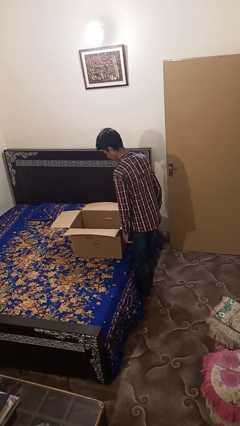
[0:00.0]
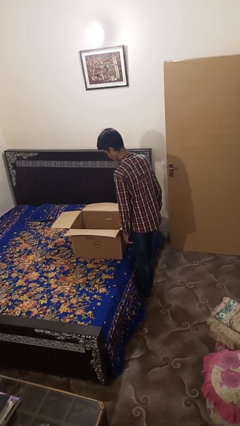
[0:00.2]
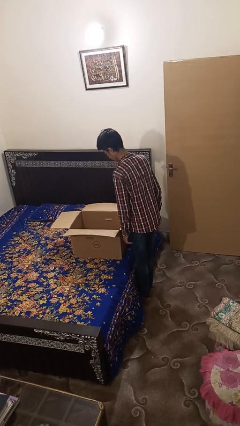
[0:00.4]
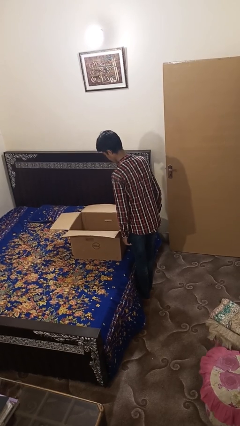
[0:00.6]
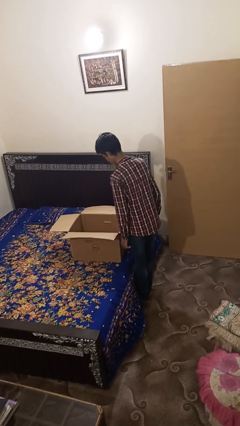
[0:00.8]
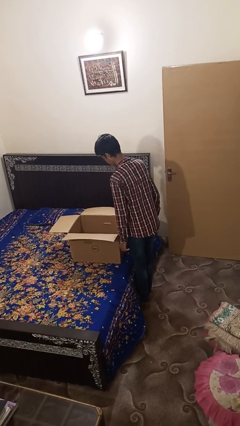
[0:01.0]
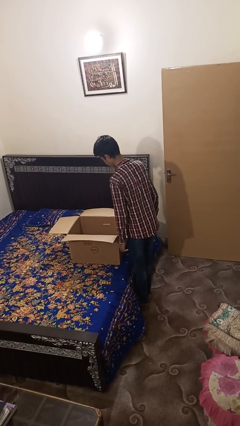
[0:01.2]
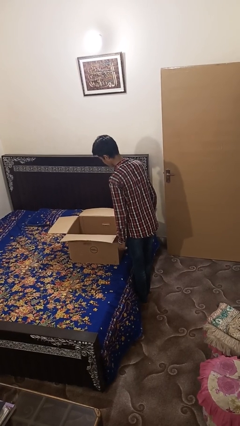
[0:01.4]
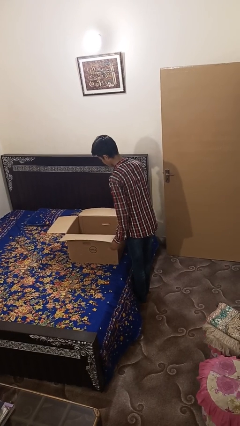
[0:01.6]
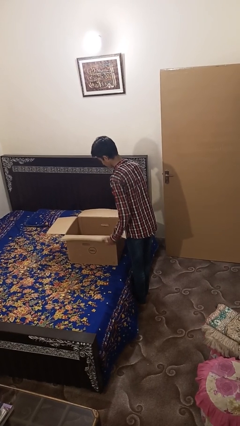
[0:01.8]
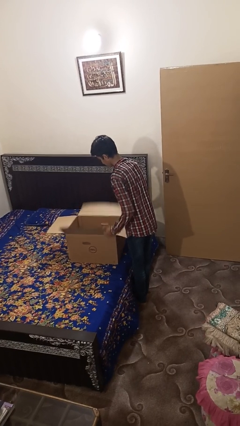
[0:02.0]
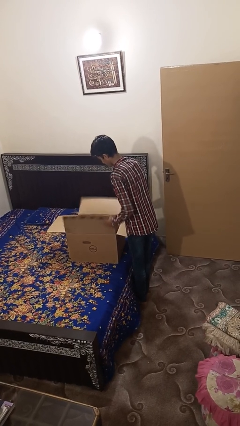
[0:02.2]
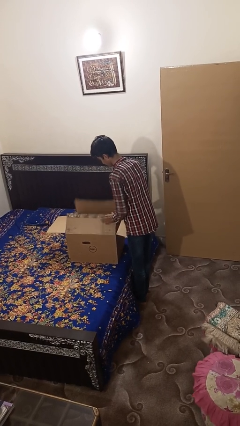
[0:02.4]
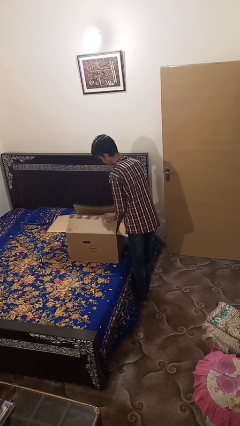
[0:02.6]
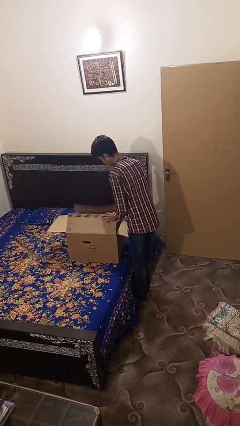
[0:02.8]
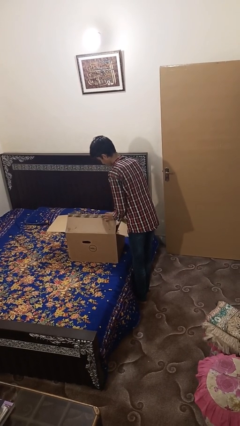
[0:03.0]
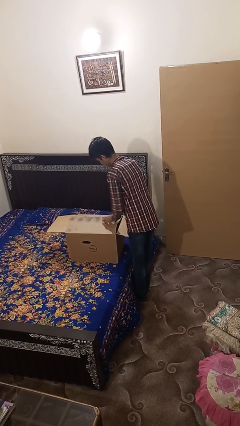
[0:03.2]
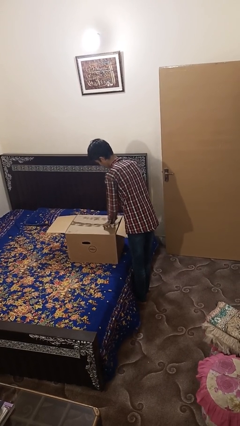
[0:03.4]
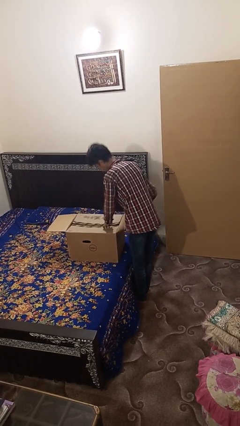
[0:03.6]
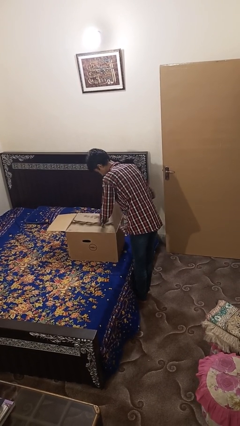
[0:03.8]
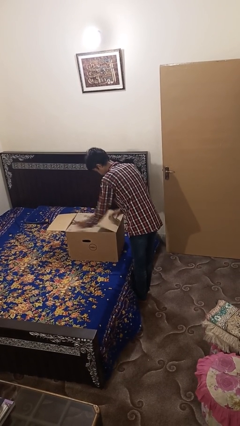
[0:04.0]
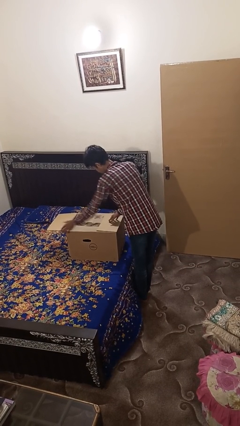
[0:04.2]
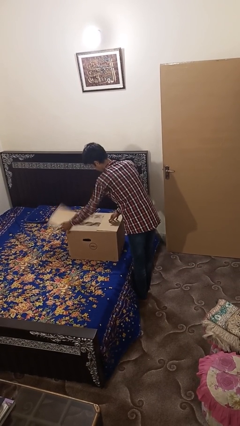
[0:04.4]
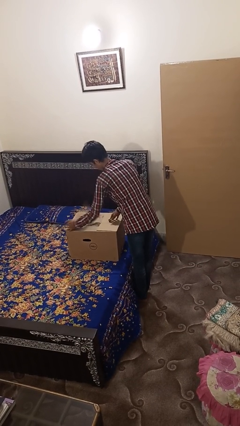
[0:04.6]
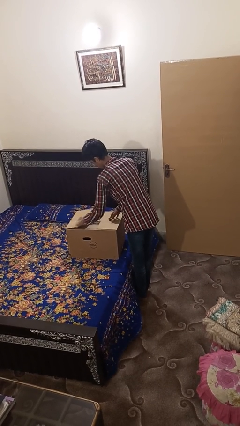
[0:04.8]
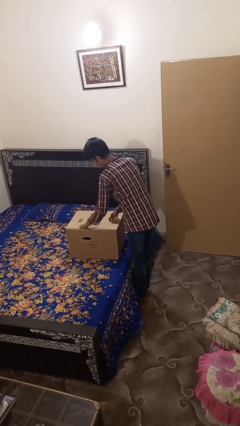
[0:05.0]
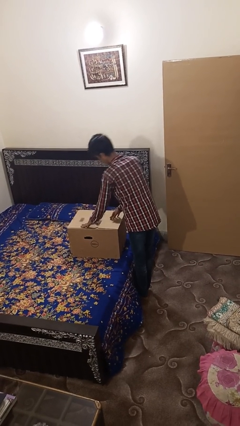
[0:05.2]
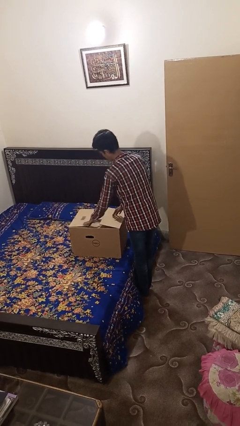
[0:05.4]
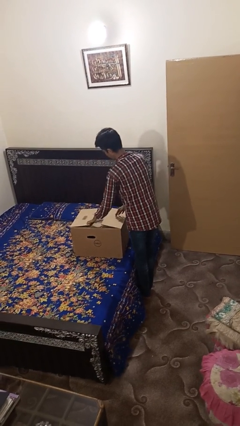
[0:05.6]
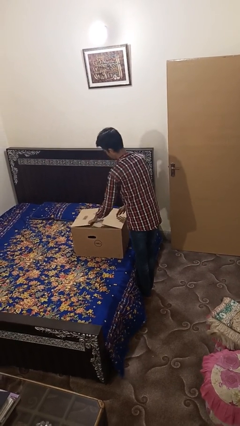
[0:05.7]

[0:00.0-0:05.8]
person closes box

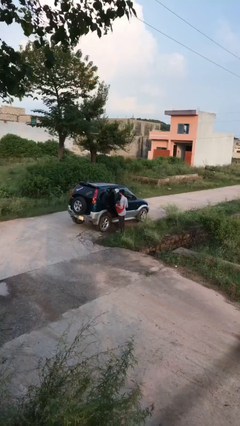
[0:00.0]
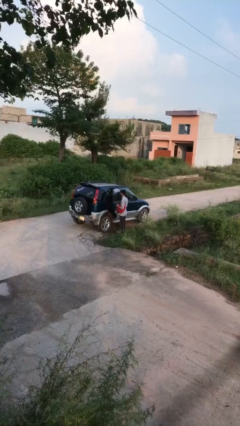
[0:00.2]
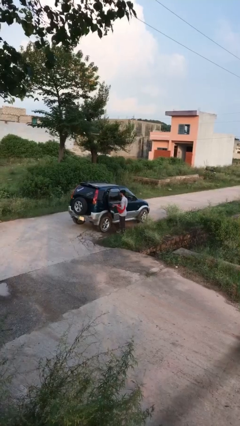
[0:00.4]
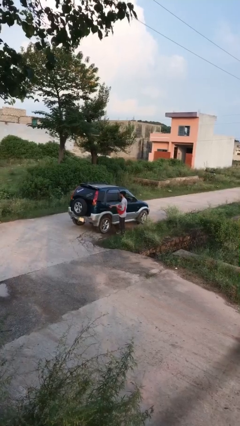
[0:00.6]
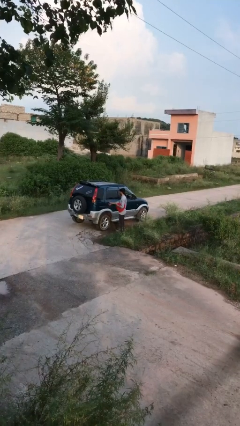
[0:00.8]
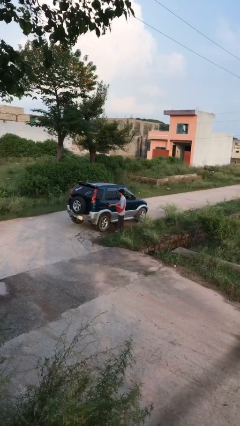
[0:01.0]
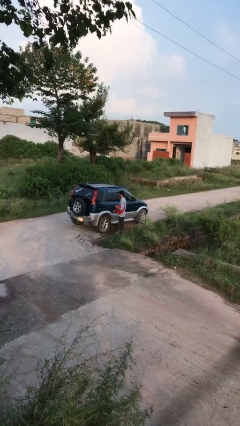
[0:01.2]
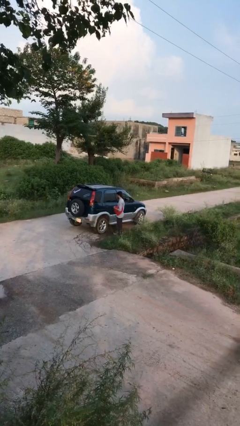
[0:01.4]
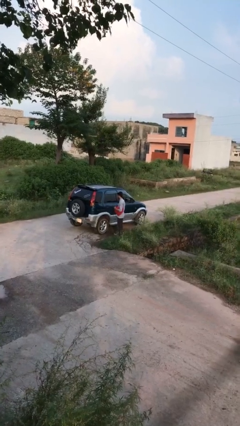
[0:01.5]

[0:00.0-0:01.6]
person closes car door

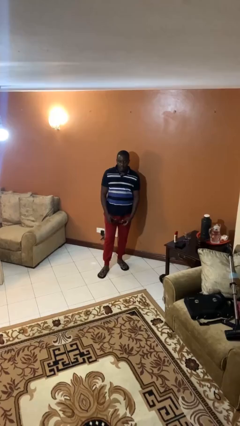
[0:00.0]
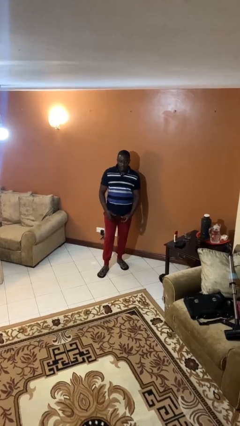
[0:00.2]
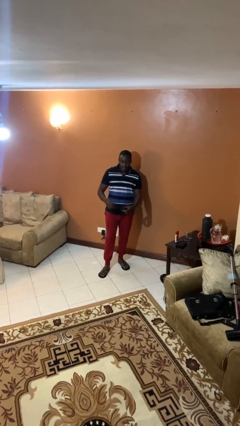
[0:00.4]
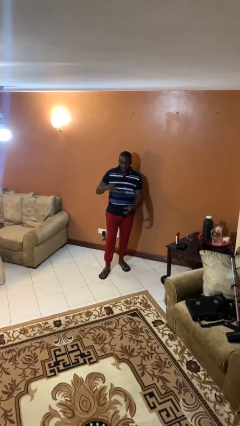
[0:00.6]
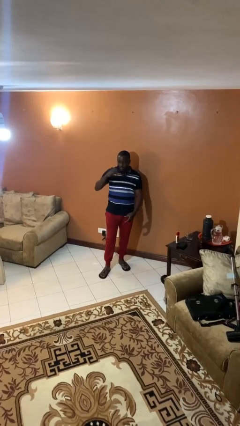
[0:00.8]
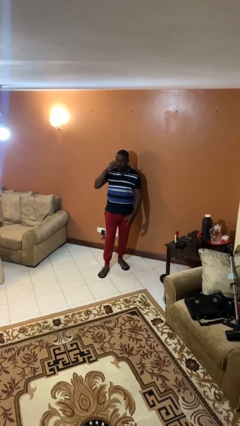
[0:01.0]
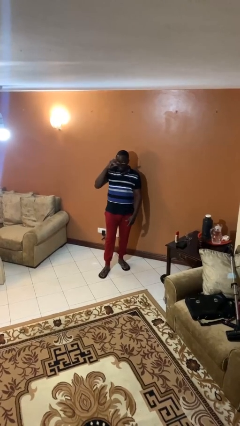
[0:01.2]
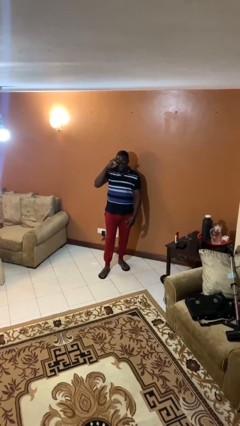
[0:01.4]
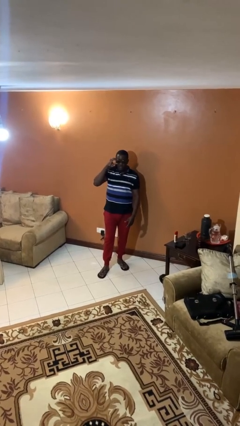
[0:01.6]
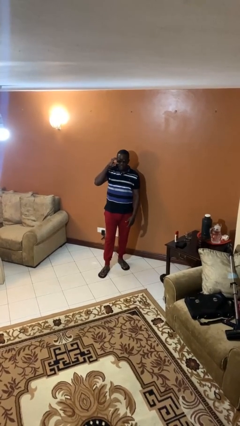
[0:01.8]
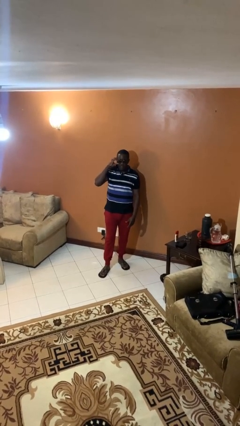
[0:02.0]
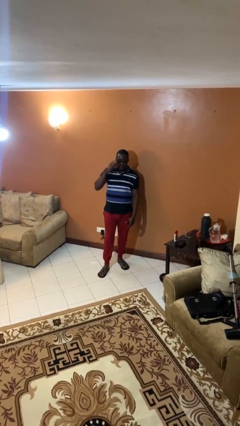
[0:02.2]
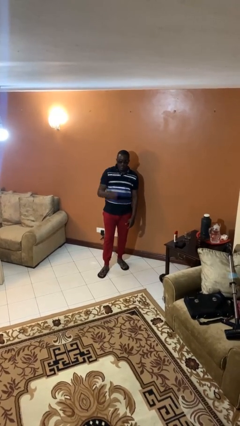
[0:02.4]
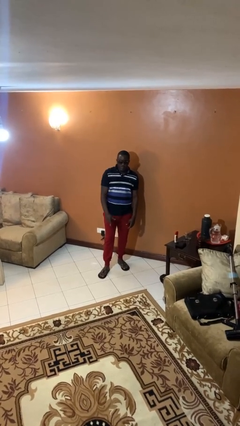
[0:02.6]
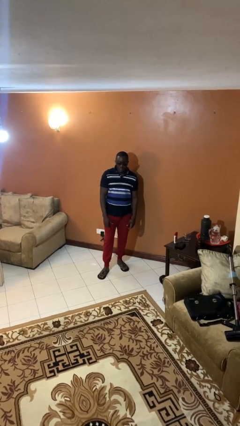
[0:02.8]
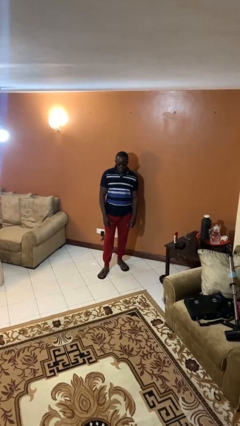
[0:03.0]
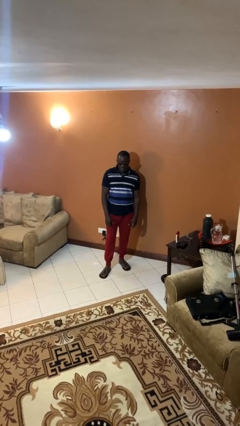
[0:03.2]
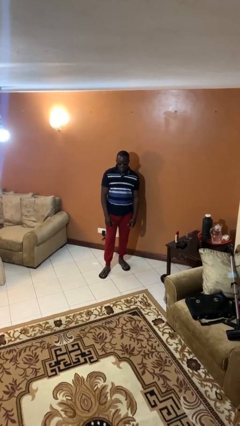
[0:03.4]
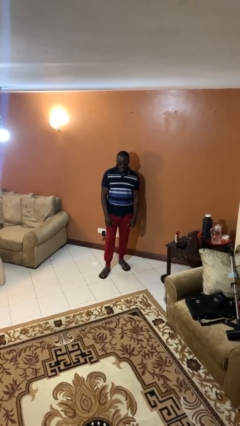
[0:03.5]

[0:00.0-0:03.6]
person puts on sunglasses

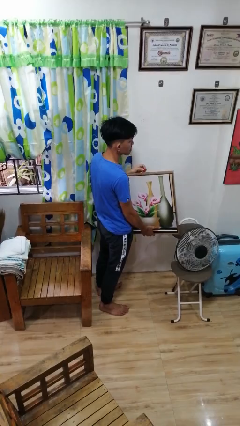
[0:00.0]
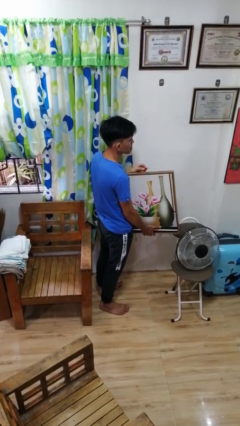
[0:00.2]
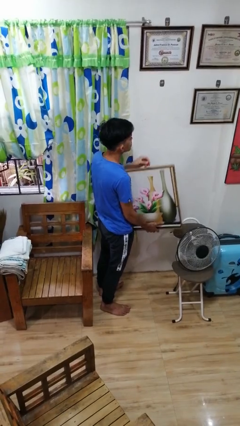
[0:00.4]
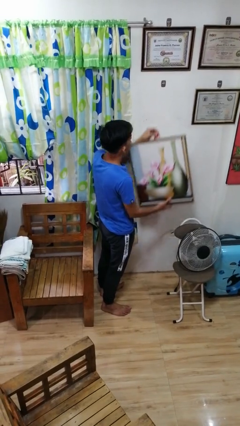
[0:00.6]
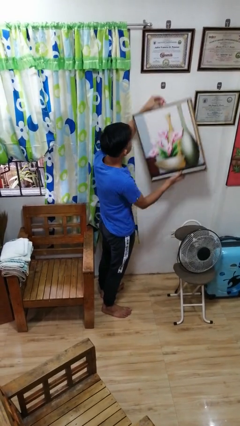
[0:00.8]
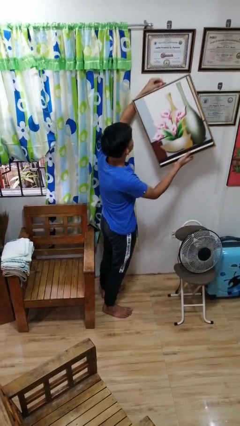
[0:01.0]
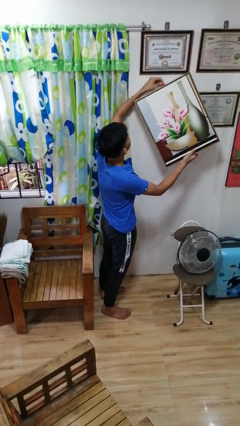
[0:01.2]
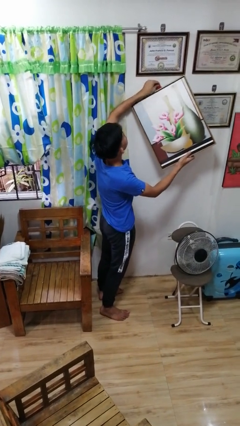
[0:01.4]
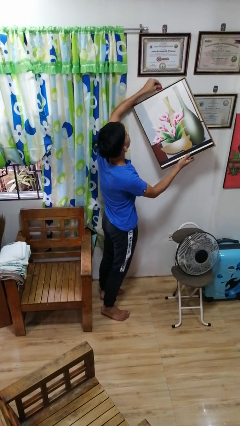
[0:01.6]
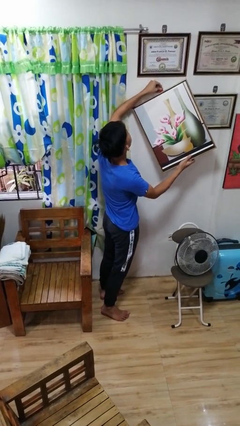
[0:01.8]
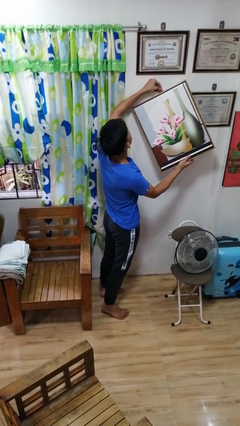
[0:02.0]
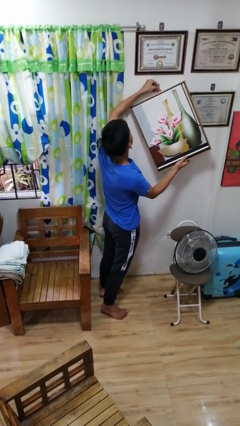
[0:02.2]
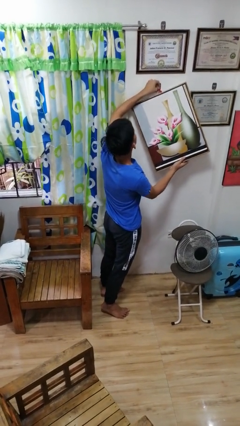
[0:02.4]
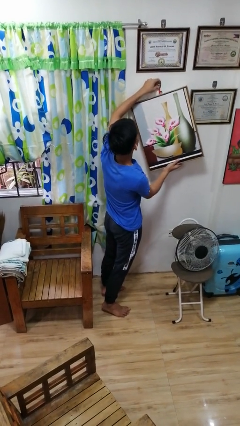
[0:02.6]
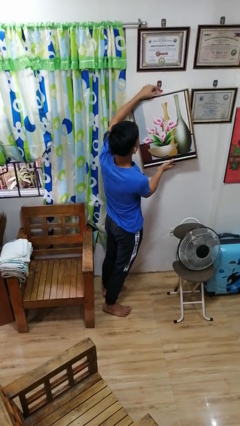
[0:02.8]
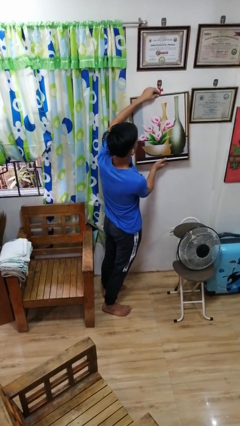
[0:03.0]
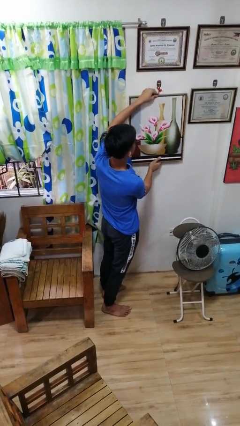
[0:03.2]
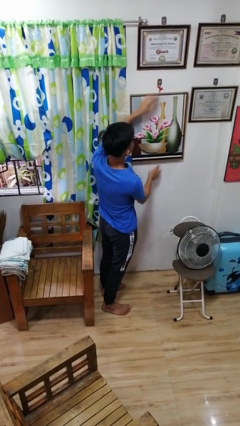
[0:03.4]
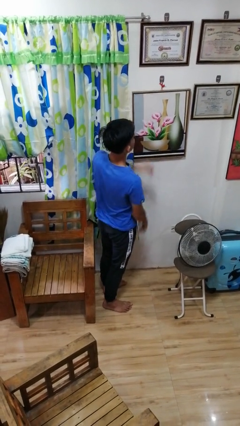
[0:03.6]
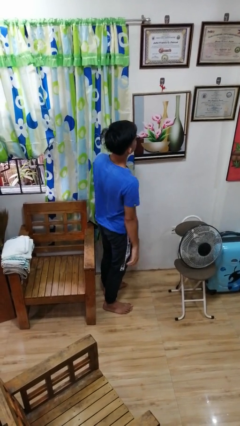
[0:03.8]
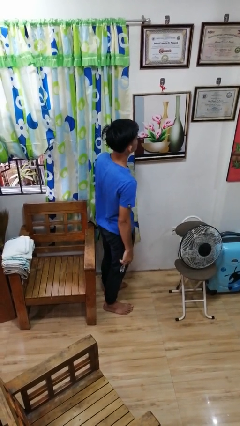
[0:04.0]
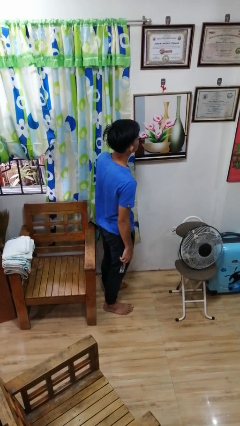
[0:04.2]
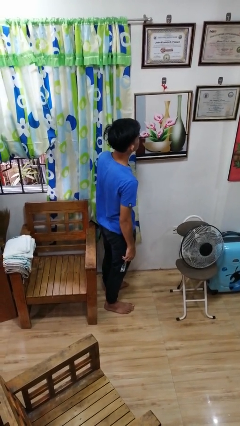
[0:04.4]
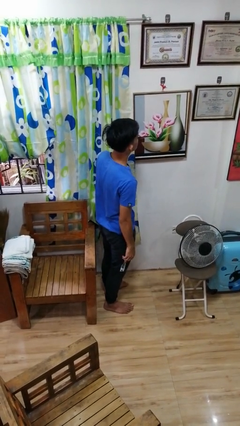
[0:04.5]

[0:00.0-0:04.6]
person puts up picture frame

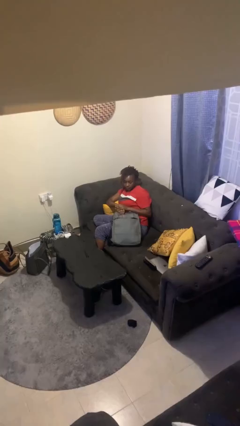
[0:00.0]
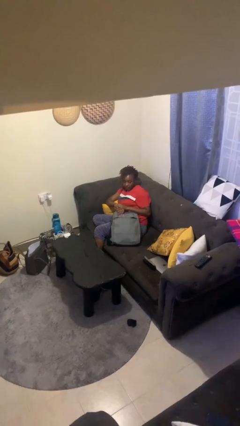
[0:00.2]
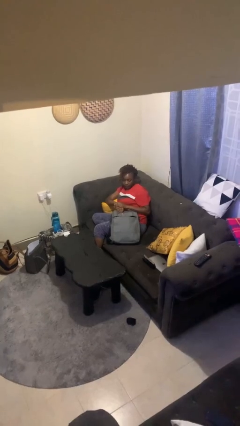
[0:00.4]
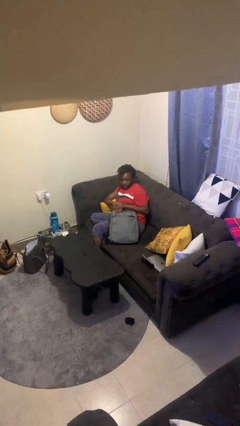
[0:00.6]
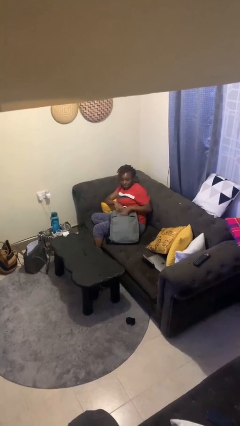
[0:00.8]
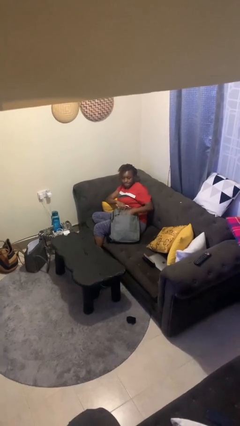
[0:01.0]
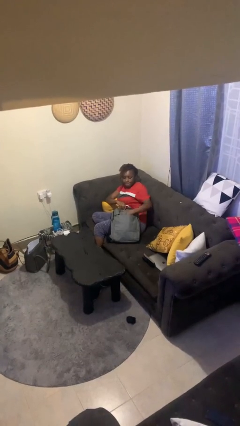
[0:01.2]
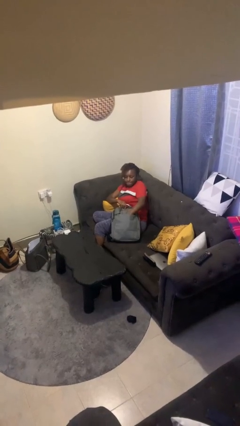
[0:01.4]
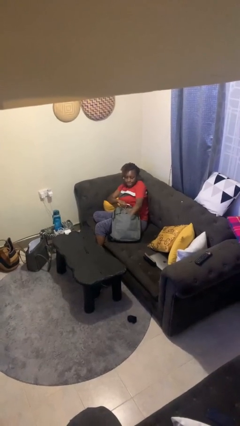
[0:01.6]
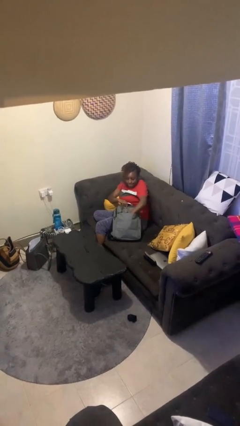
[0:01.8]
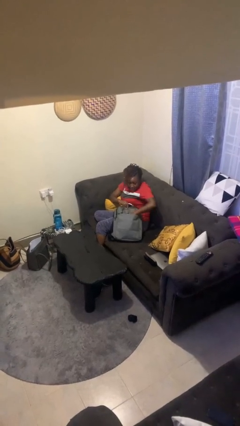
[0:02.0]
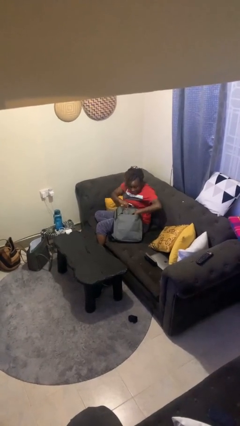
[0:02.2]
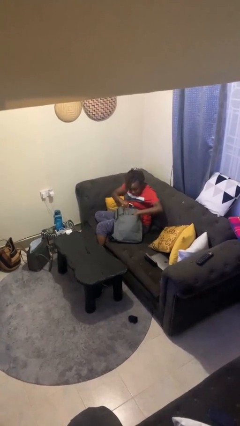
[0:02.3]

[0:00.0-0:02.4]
person searches in backpack
